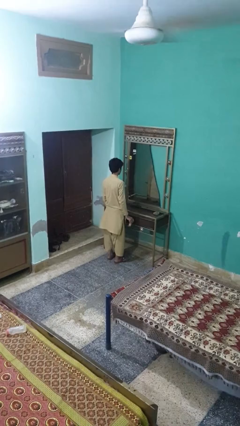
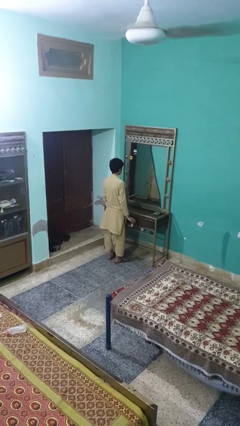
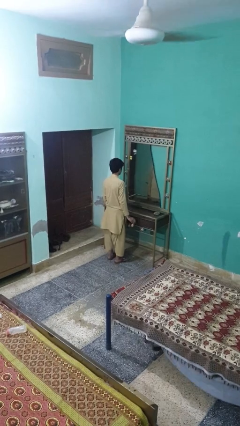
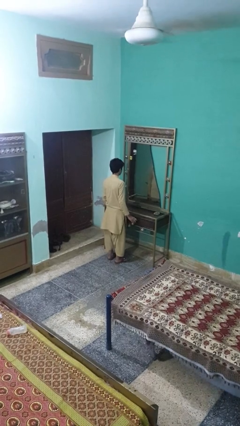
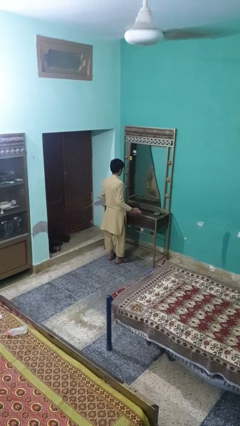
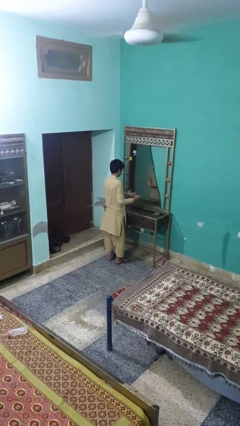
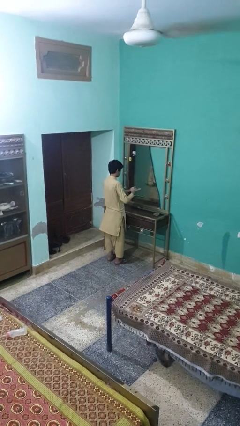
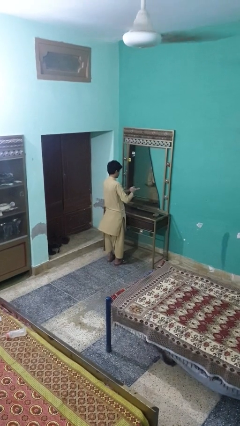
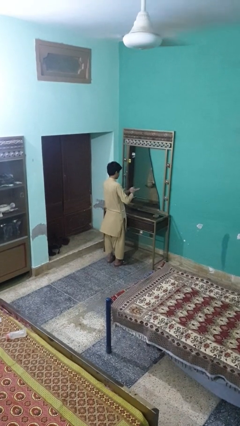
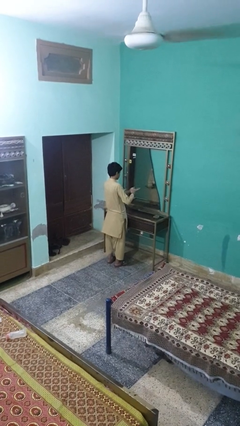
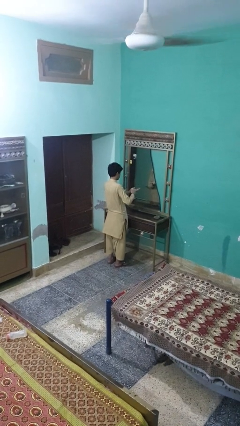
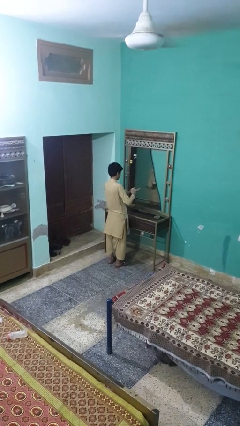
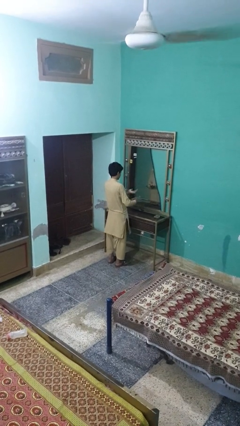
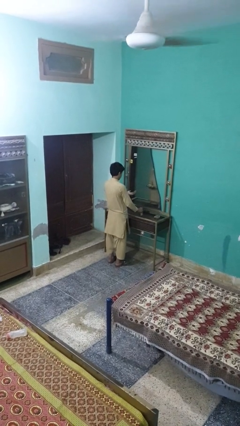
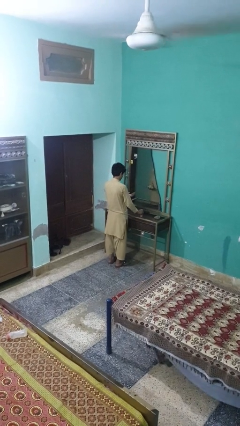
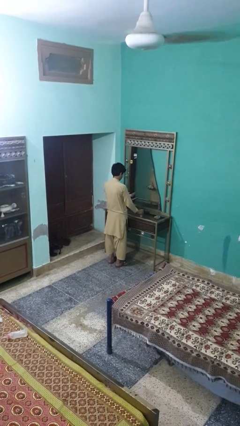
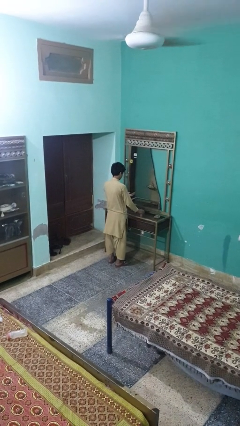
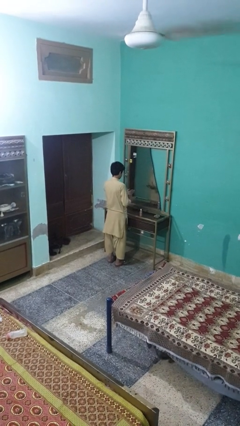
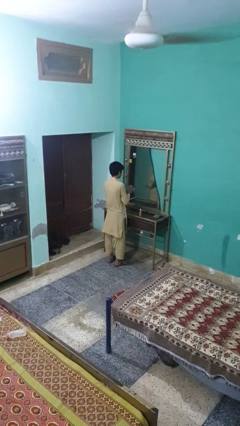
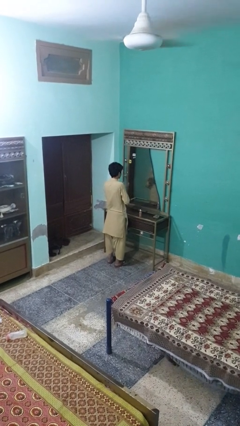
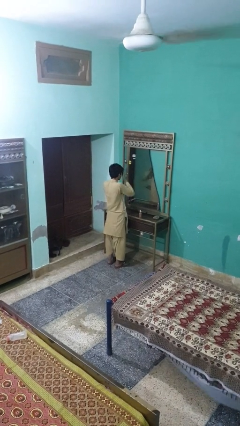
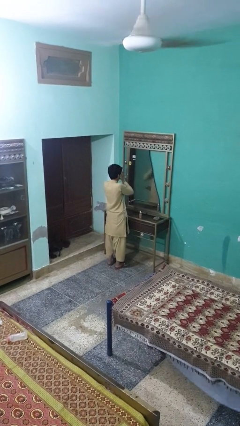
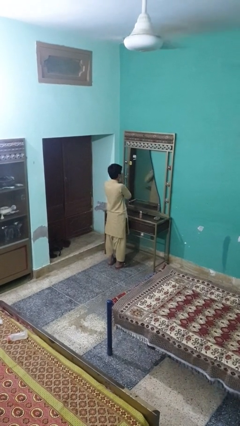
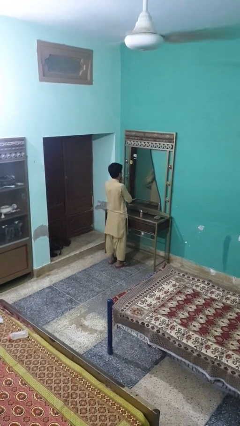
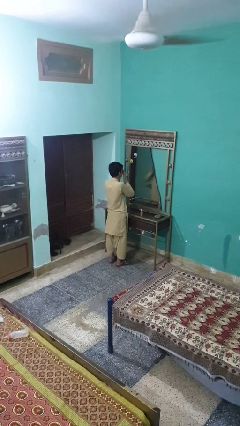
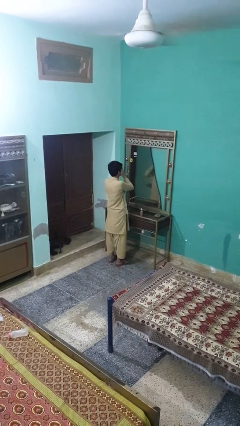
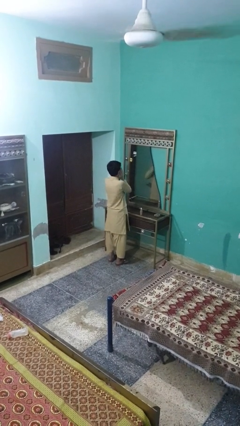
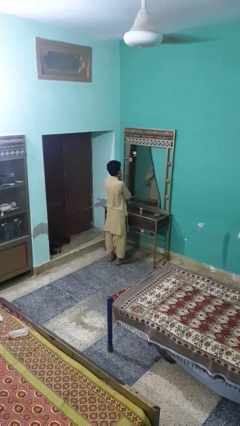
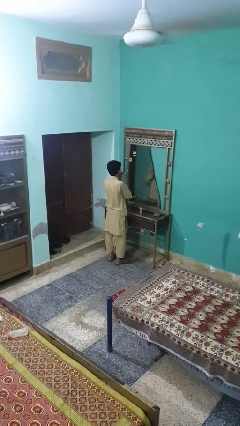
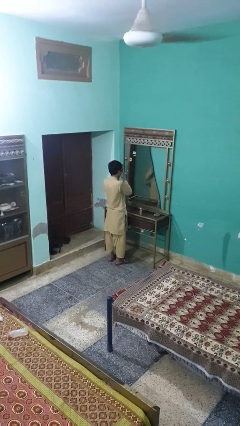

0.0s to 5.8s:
person applies foundation makeup

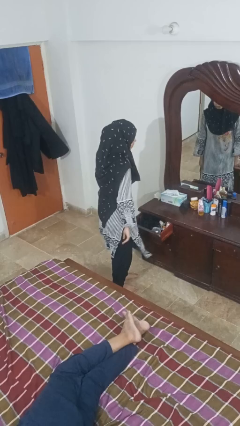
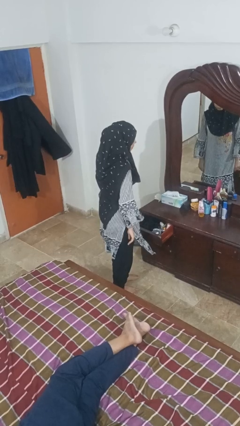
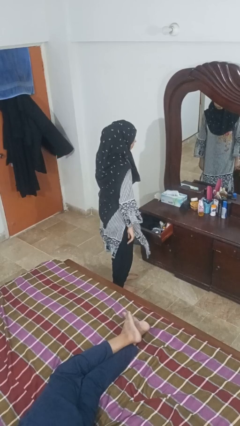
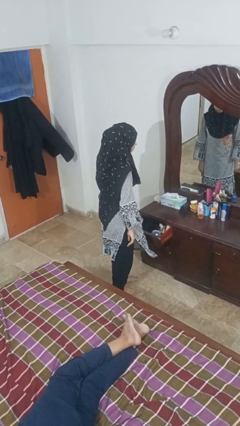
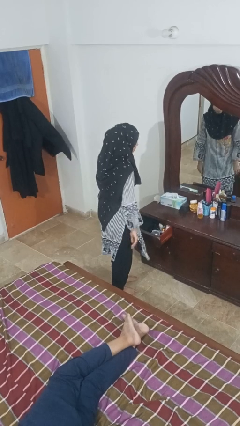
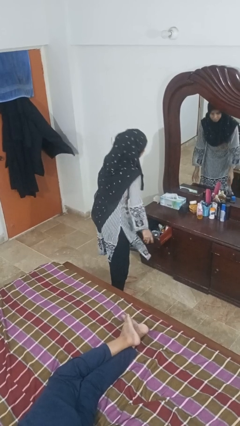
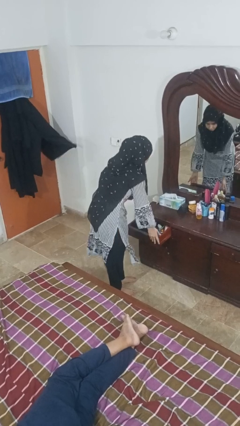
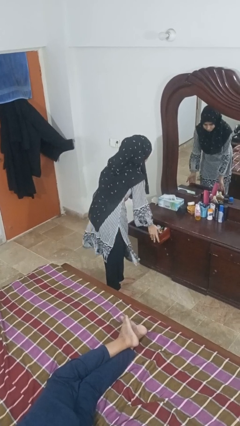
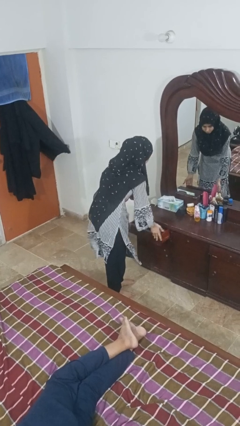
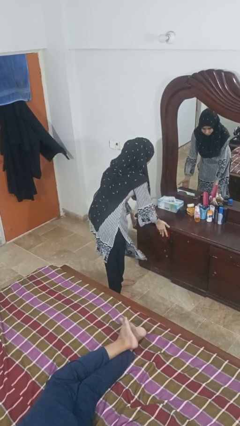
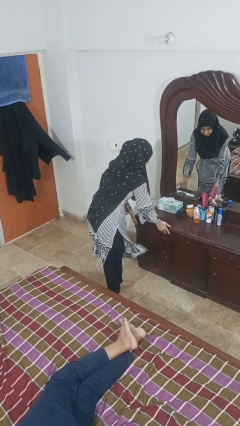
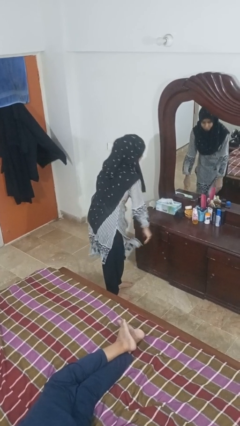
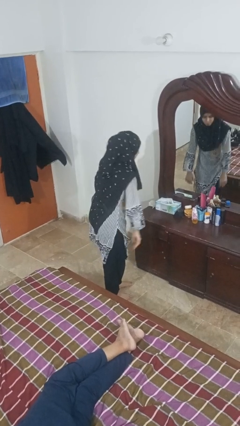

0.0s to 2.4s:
person closes dresser drawer

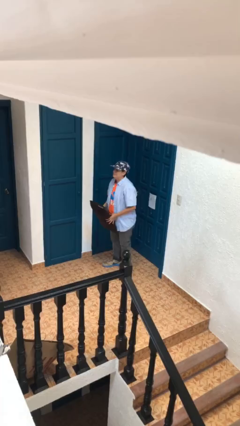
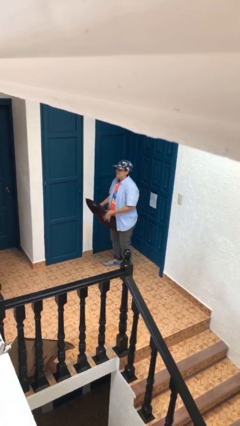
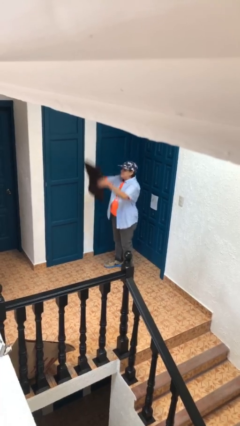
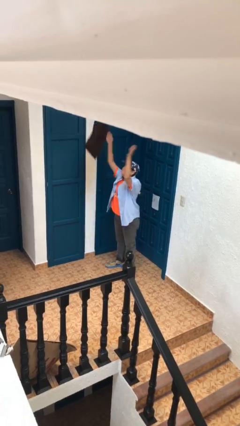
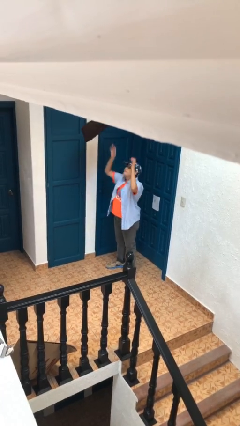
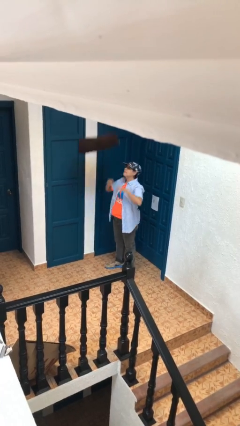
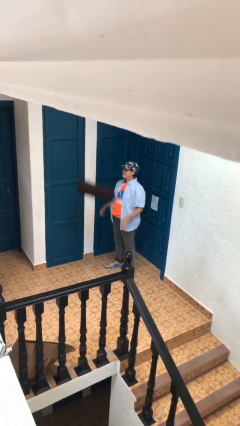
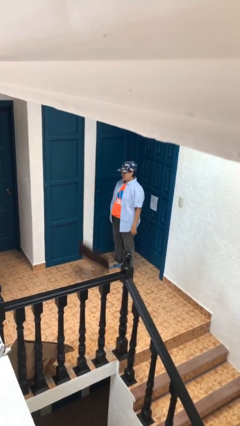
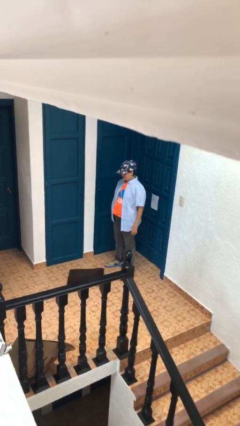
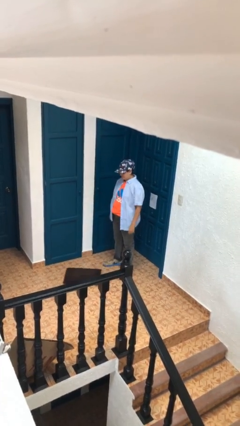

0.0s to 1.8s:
person throws object into air

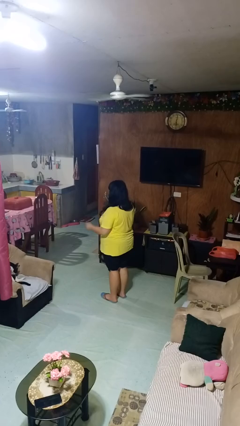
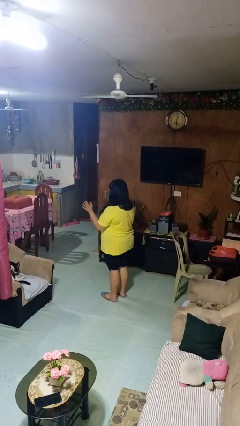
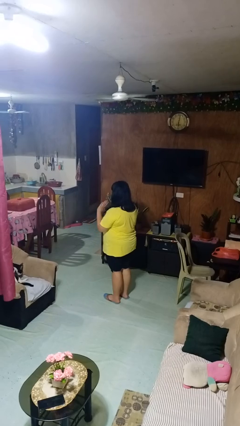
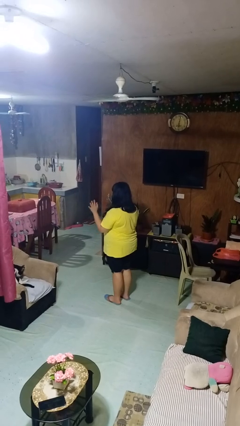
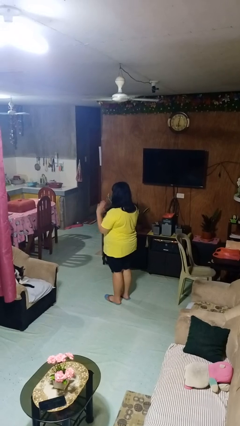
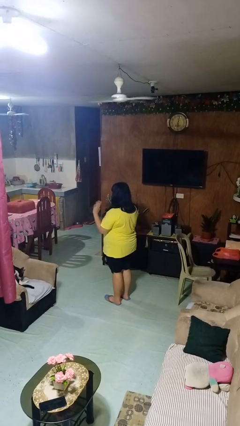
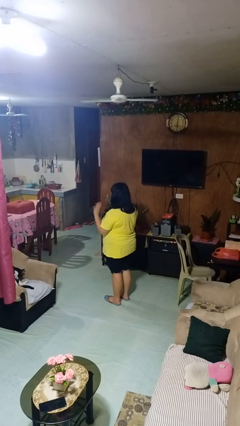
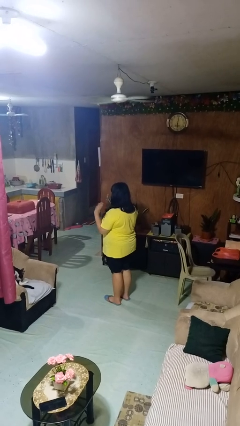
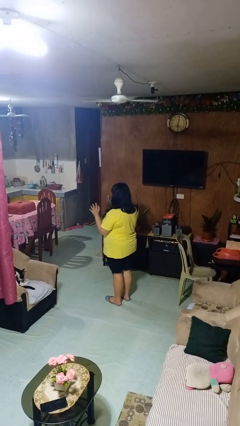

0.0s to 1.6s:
person waves at person

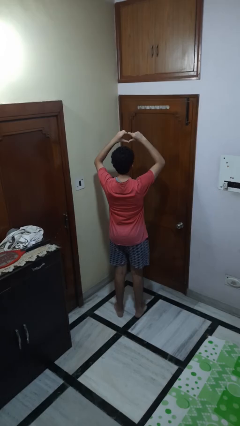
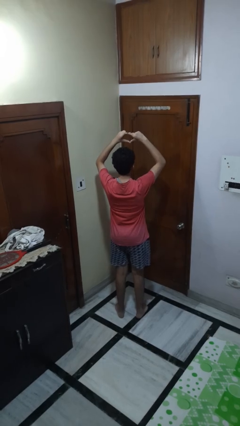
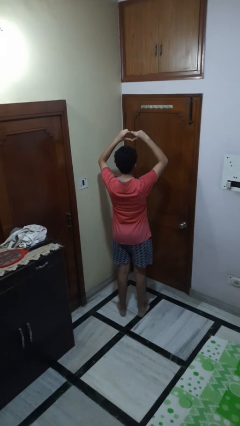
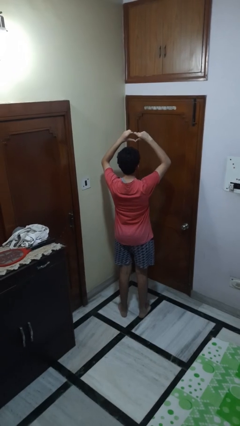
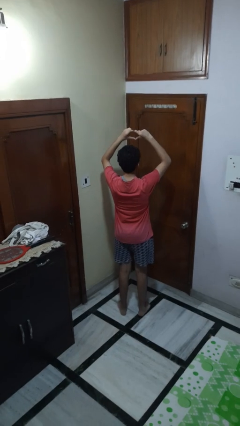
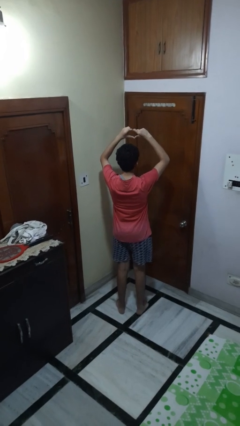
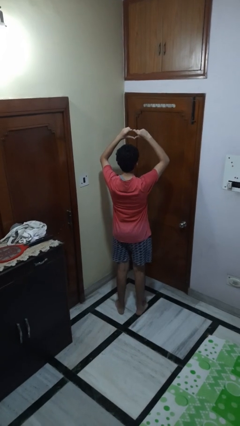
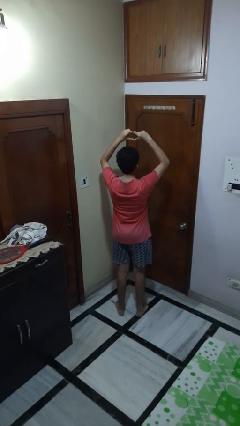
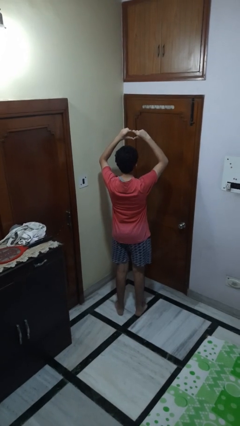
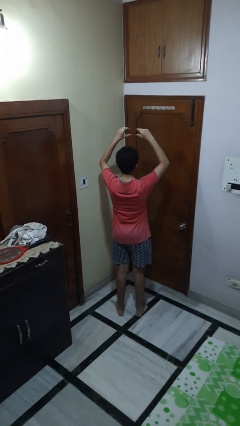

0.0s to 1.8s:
person gestures heart

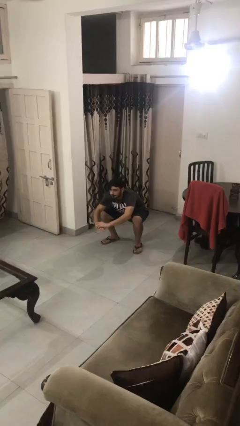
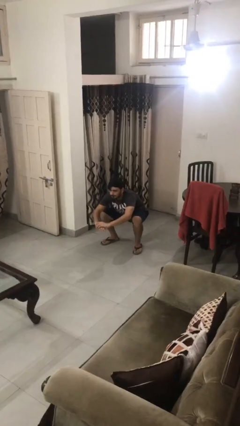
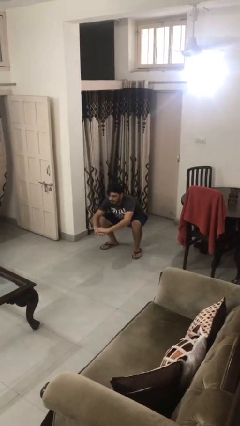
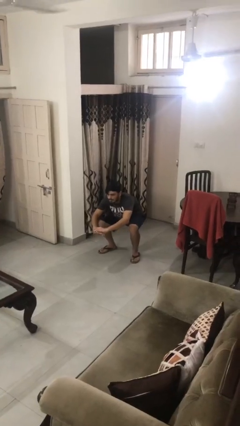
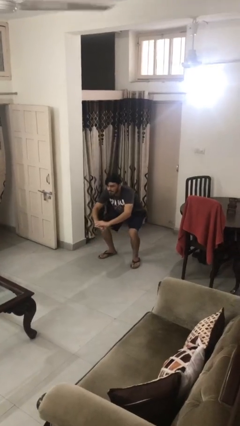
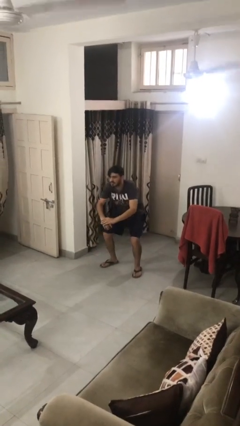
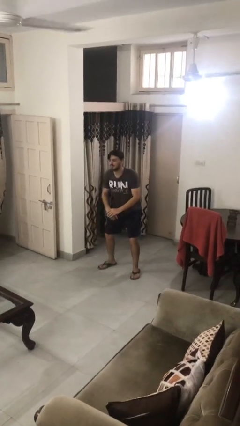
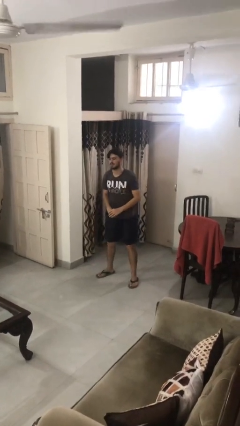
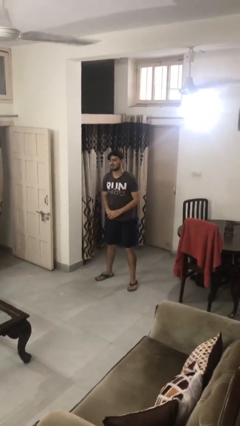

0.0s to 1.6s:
person stands up

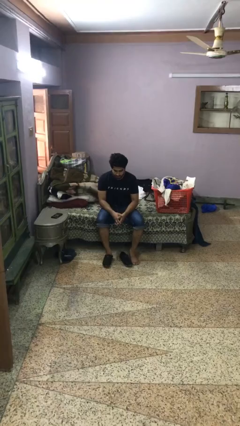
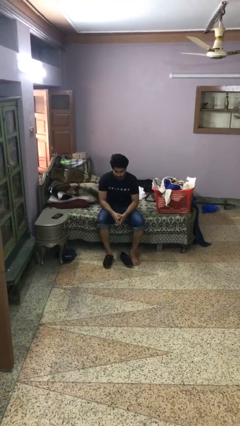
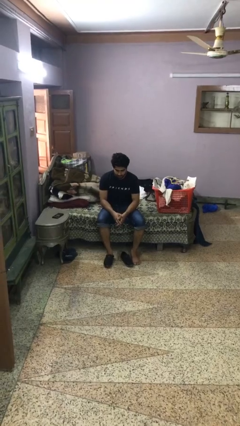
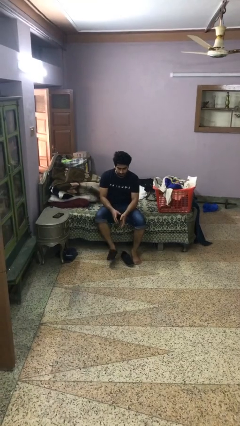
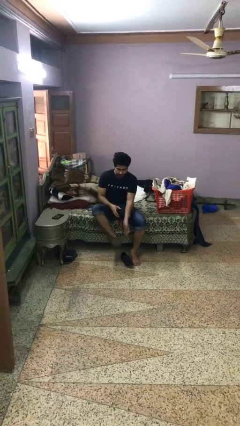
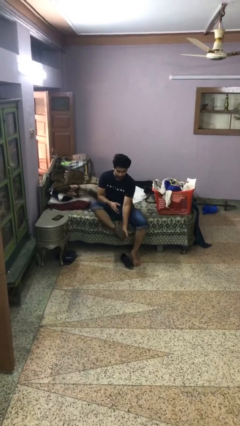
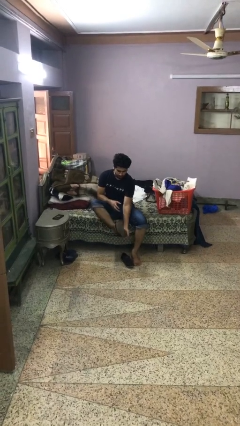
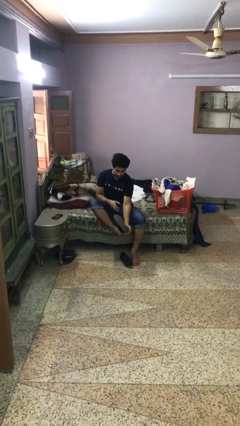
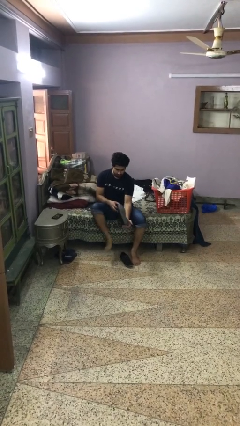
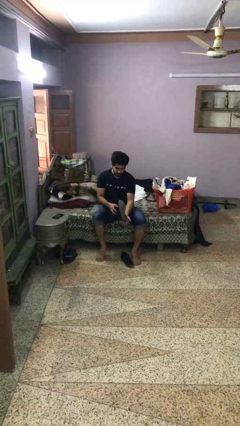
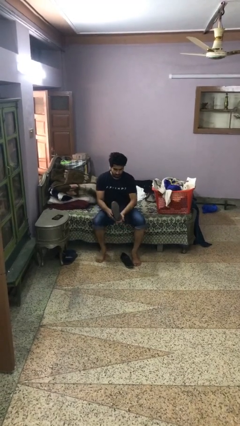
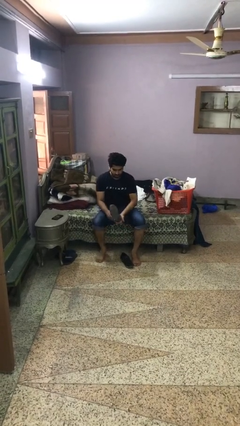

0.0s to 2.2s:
person takes off boots
